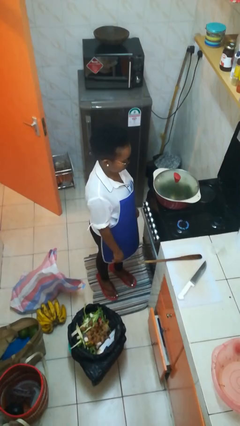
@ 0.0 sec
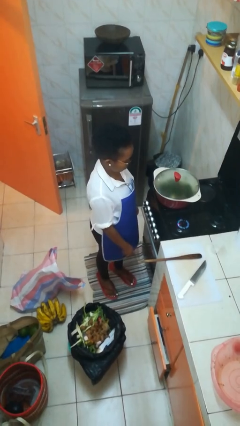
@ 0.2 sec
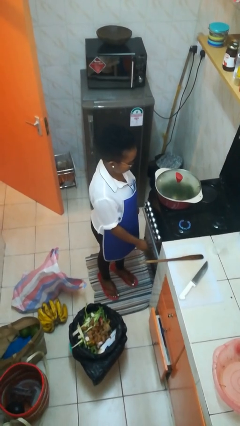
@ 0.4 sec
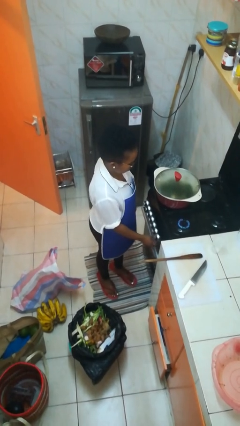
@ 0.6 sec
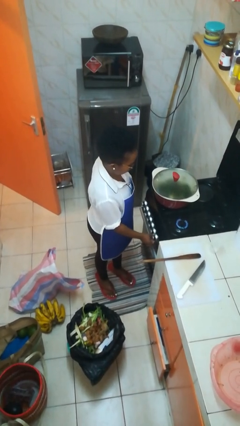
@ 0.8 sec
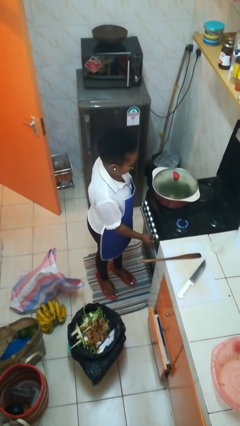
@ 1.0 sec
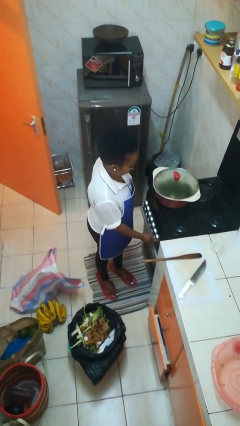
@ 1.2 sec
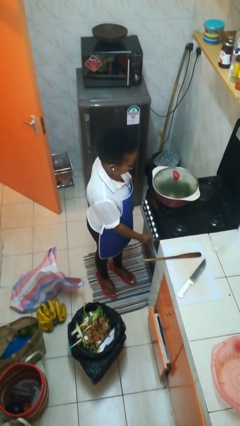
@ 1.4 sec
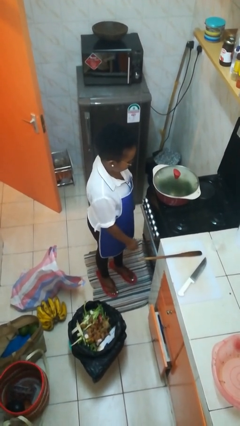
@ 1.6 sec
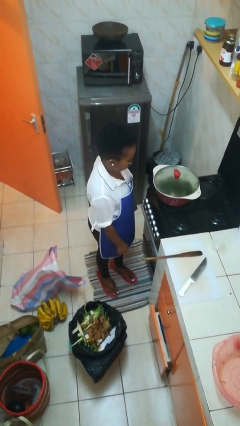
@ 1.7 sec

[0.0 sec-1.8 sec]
person turns off stovetop

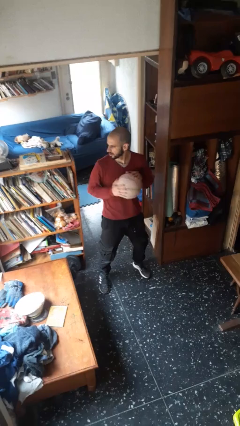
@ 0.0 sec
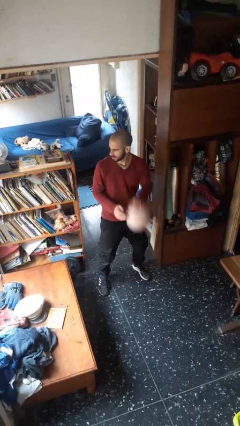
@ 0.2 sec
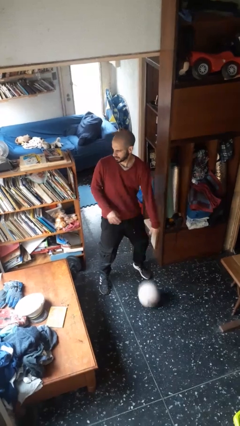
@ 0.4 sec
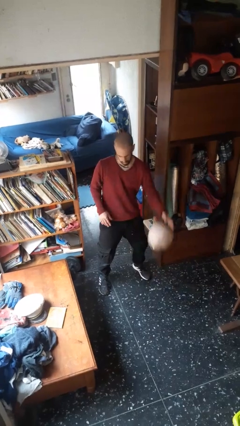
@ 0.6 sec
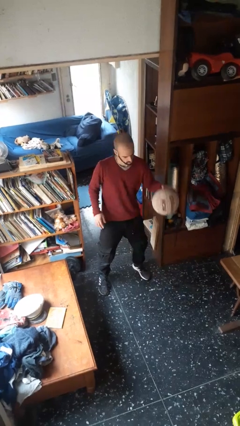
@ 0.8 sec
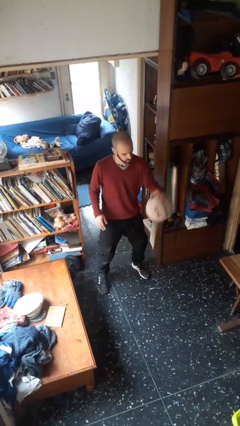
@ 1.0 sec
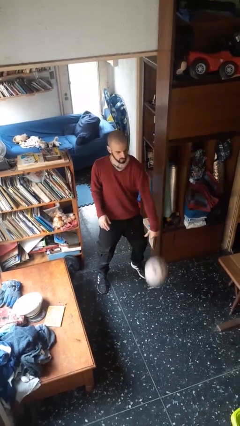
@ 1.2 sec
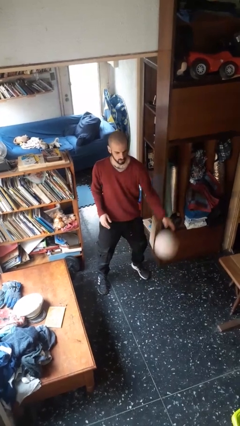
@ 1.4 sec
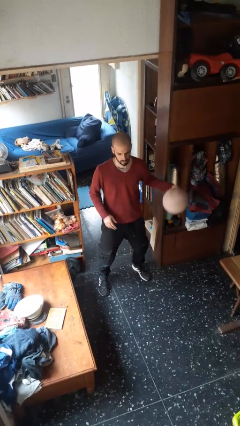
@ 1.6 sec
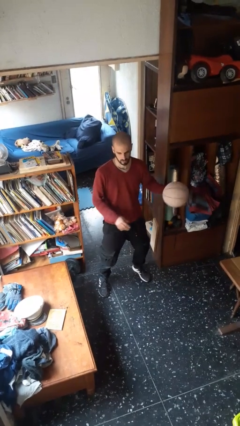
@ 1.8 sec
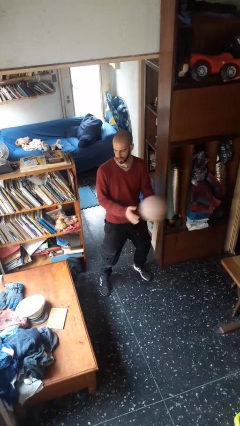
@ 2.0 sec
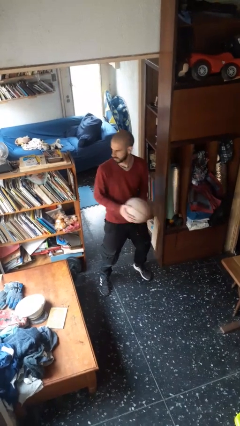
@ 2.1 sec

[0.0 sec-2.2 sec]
person bounces ball on floor

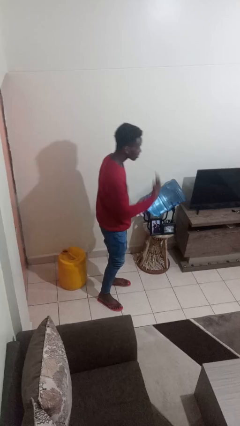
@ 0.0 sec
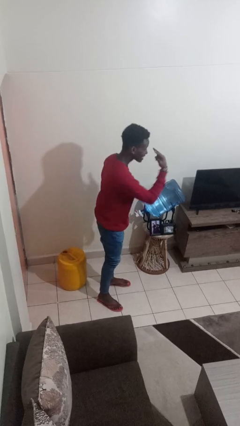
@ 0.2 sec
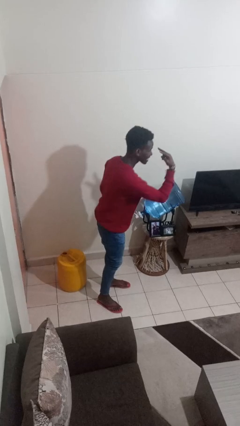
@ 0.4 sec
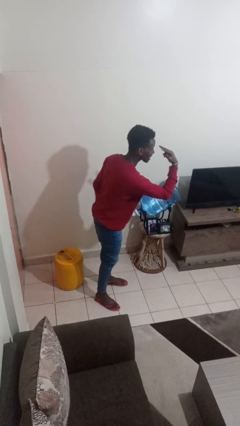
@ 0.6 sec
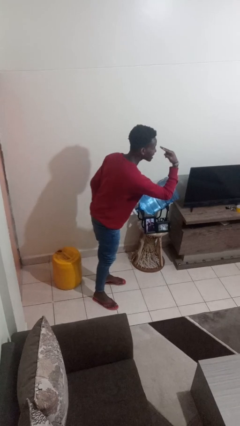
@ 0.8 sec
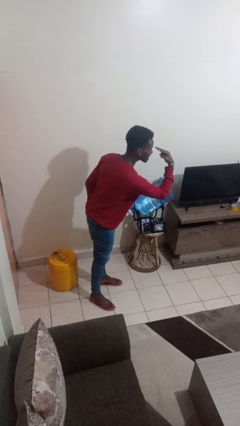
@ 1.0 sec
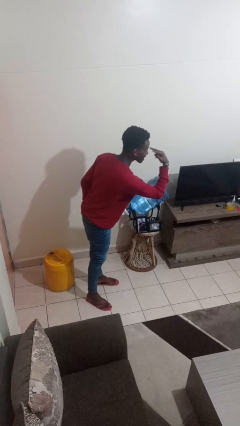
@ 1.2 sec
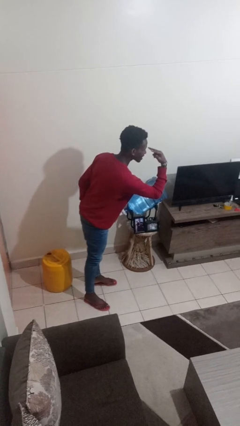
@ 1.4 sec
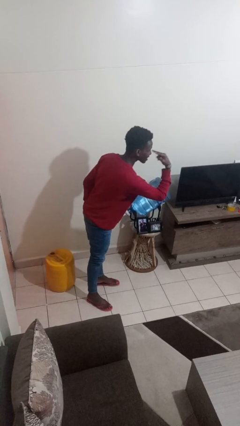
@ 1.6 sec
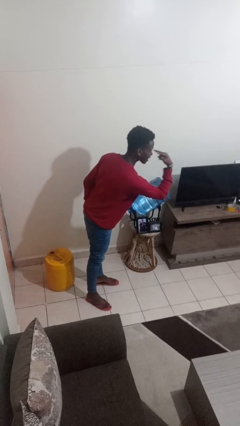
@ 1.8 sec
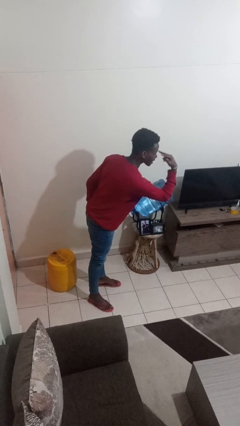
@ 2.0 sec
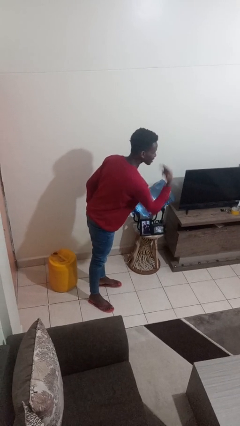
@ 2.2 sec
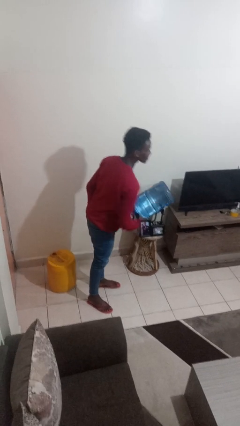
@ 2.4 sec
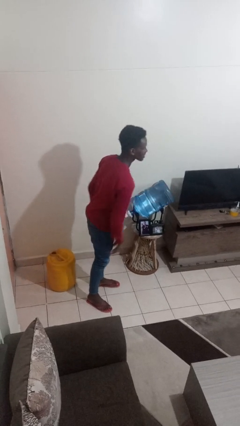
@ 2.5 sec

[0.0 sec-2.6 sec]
person gestures watch closely

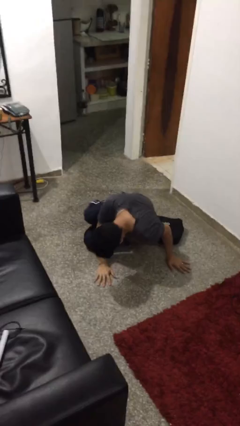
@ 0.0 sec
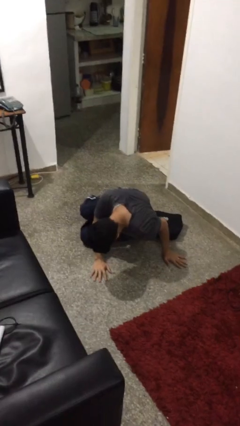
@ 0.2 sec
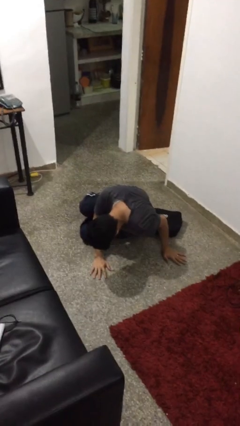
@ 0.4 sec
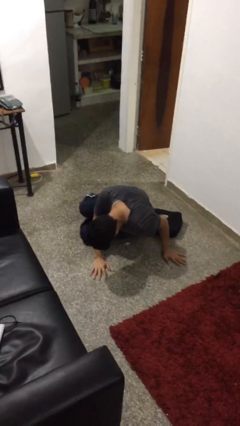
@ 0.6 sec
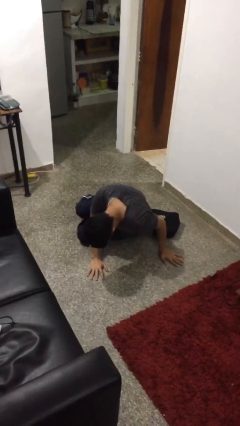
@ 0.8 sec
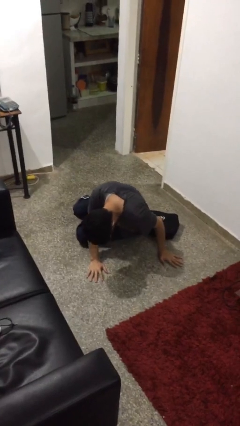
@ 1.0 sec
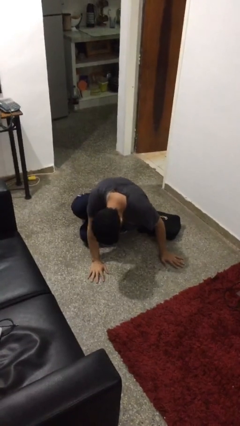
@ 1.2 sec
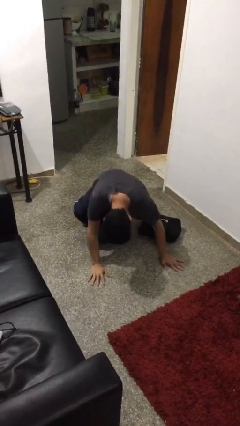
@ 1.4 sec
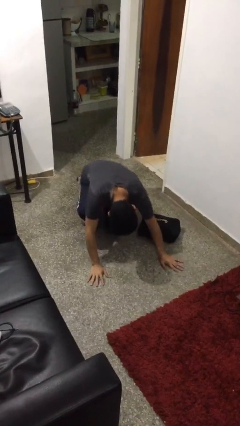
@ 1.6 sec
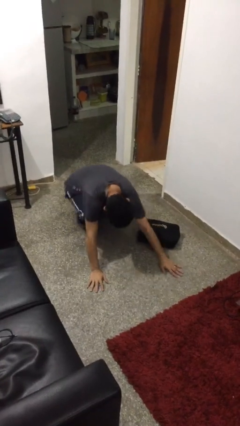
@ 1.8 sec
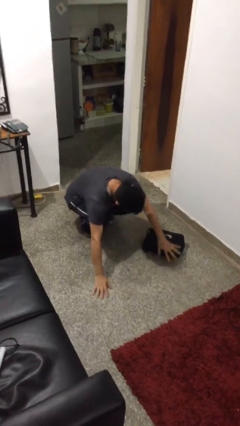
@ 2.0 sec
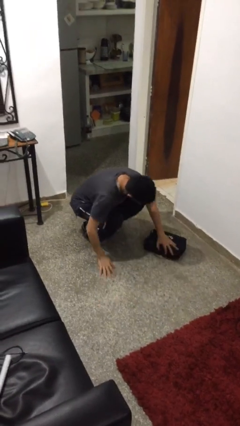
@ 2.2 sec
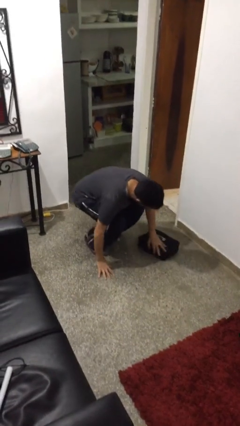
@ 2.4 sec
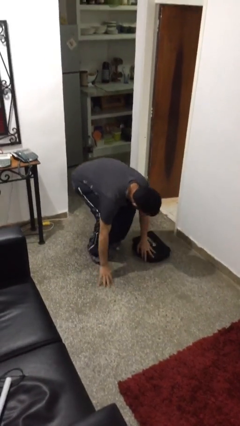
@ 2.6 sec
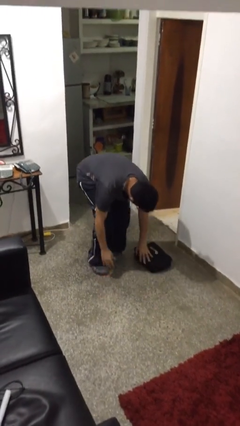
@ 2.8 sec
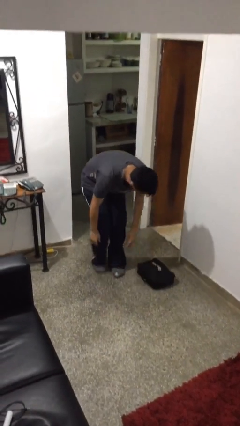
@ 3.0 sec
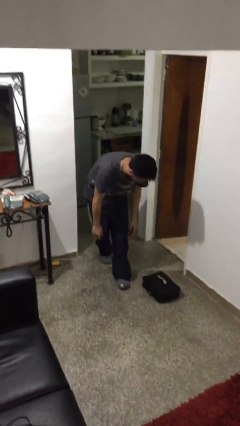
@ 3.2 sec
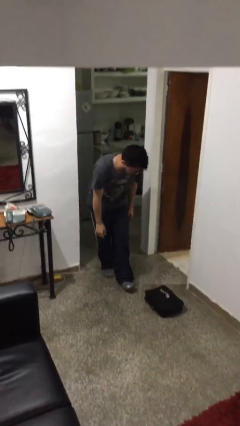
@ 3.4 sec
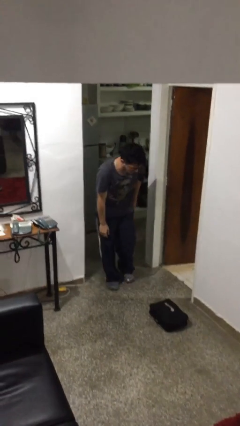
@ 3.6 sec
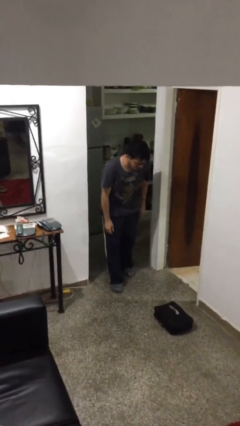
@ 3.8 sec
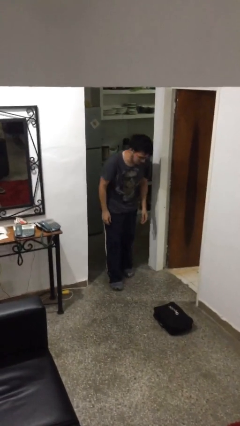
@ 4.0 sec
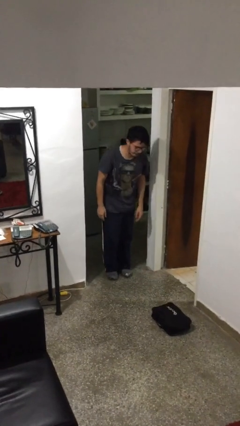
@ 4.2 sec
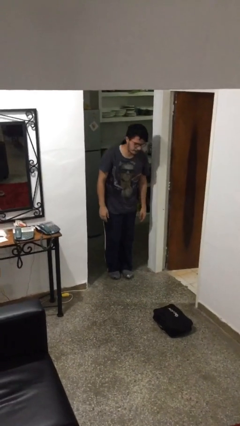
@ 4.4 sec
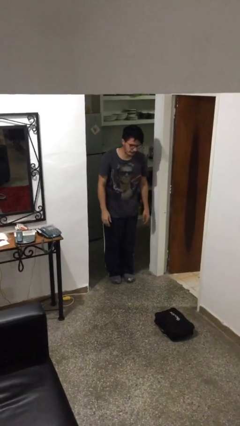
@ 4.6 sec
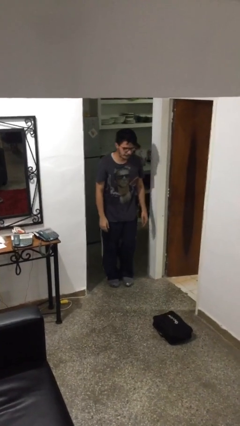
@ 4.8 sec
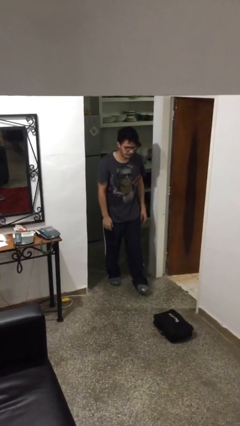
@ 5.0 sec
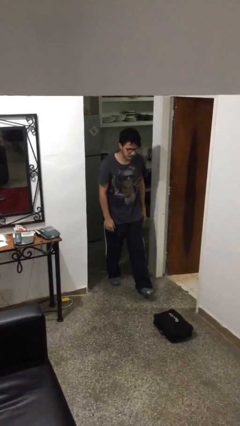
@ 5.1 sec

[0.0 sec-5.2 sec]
person stands up from floor

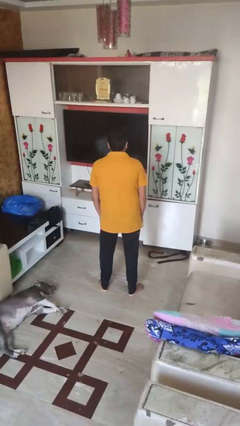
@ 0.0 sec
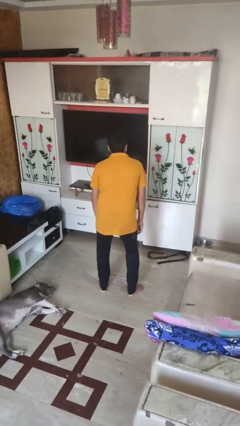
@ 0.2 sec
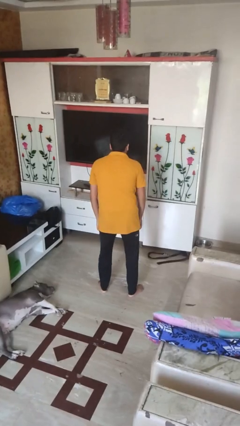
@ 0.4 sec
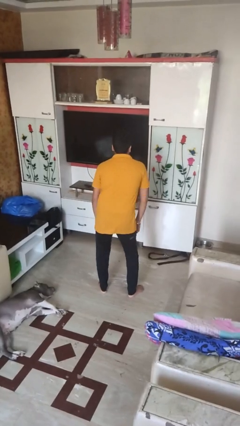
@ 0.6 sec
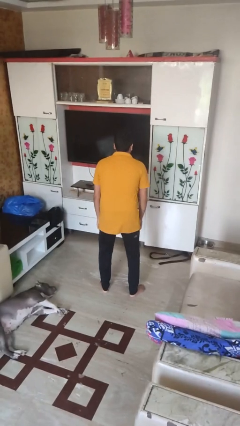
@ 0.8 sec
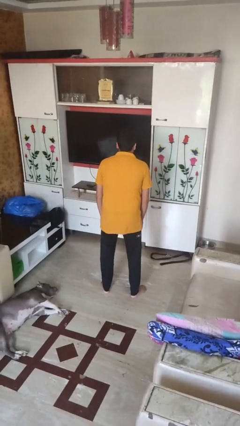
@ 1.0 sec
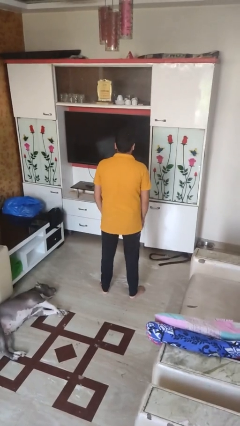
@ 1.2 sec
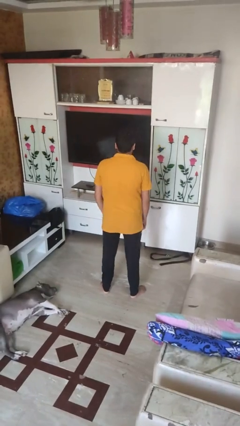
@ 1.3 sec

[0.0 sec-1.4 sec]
person wiggles hips

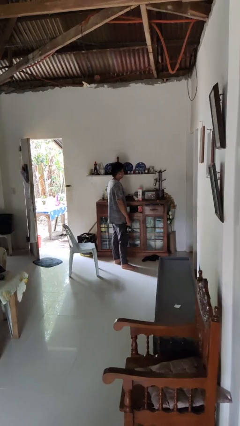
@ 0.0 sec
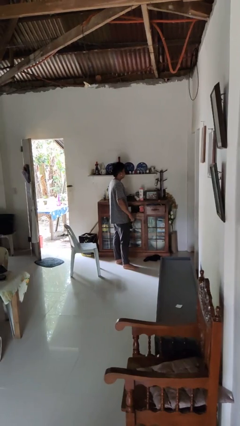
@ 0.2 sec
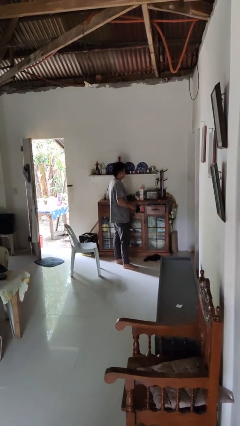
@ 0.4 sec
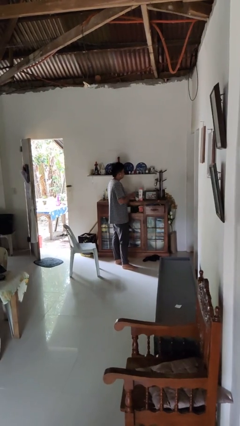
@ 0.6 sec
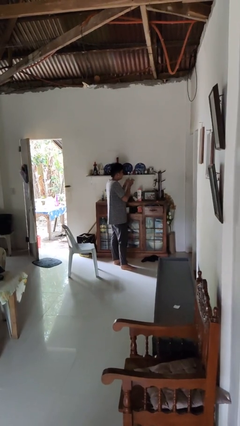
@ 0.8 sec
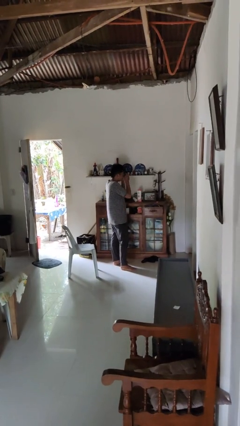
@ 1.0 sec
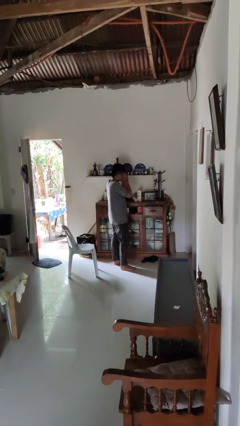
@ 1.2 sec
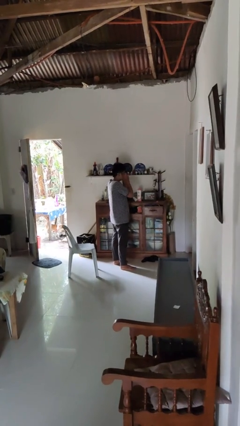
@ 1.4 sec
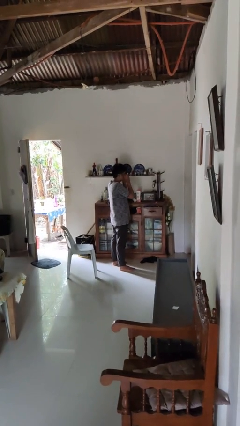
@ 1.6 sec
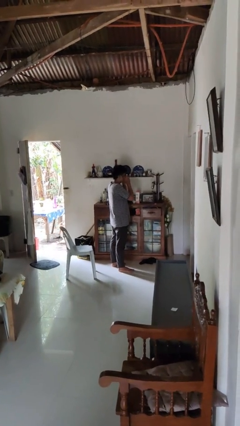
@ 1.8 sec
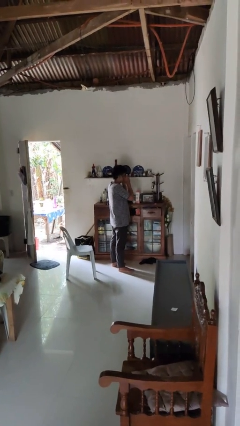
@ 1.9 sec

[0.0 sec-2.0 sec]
person puts on sunglasses

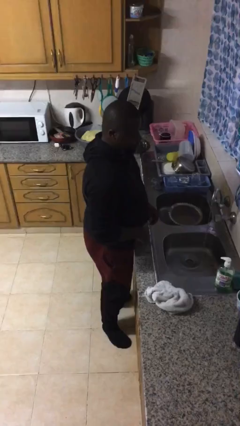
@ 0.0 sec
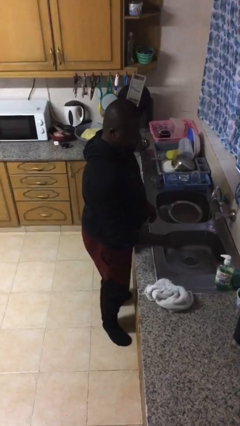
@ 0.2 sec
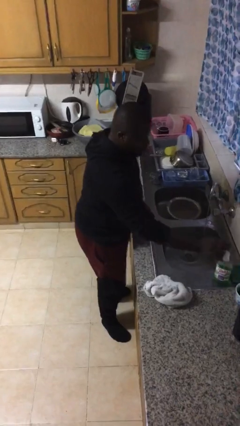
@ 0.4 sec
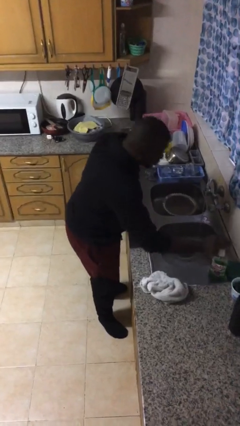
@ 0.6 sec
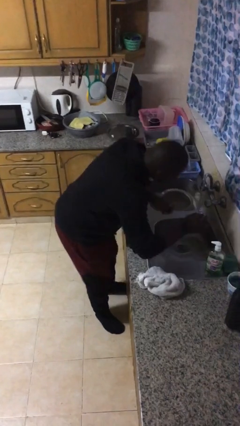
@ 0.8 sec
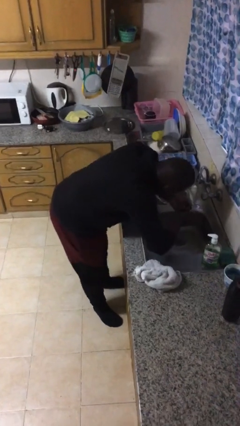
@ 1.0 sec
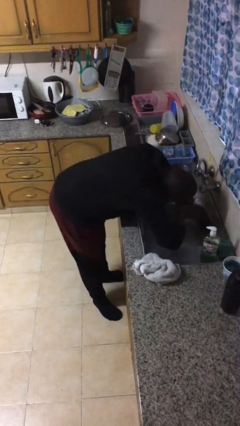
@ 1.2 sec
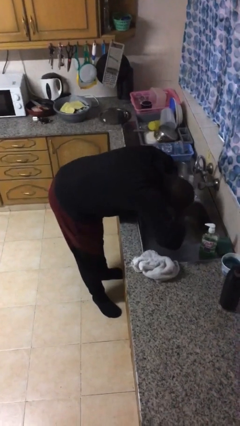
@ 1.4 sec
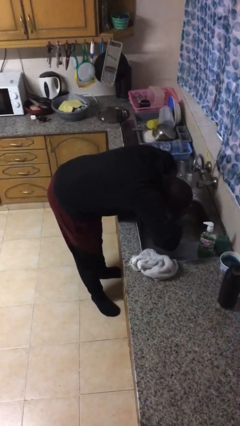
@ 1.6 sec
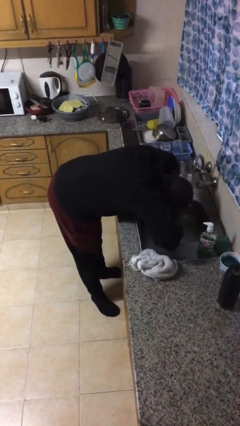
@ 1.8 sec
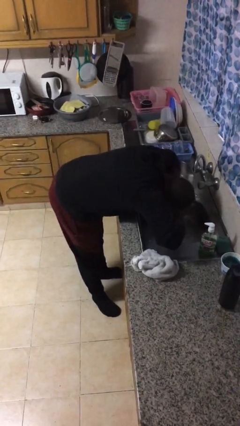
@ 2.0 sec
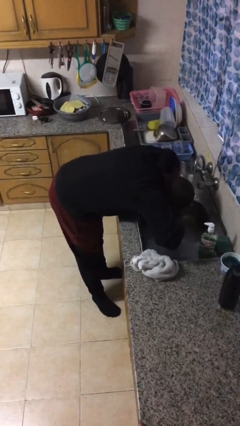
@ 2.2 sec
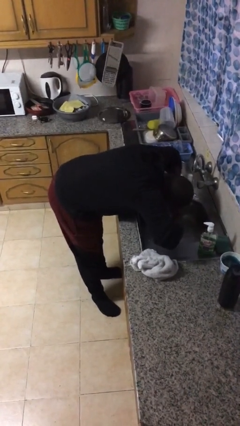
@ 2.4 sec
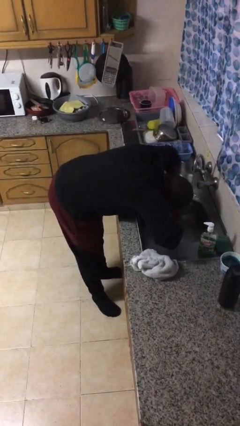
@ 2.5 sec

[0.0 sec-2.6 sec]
person washes face
